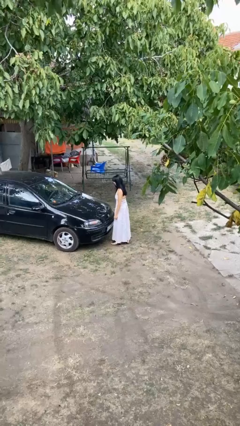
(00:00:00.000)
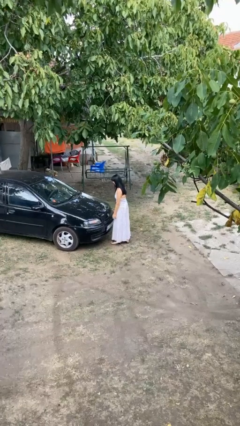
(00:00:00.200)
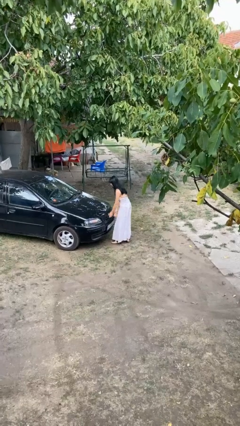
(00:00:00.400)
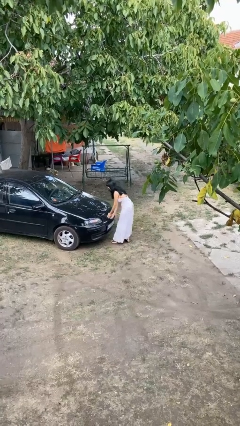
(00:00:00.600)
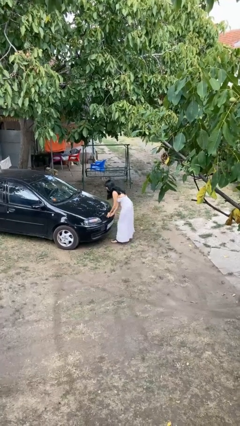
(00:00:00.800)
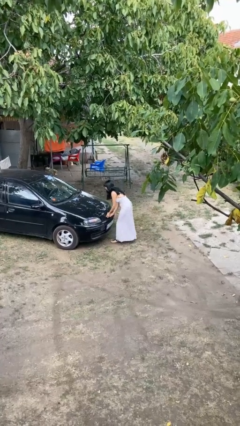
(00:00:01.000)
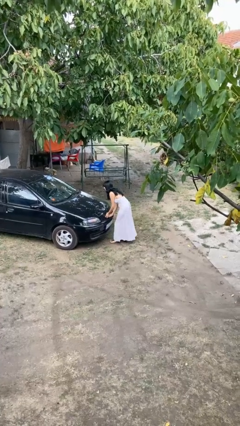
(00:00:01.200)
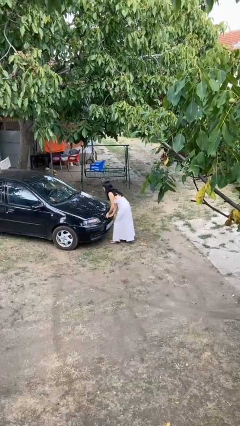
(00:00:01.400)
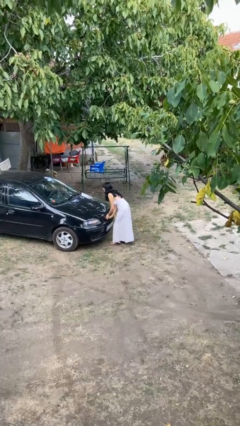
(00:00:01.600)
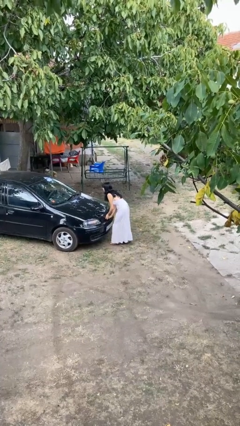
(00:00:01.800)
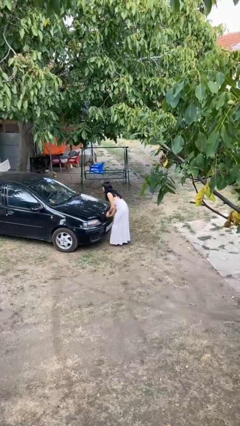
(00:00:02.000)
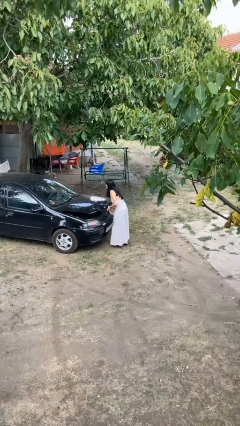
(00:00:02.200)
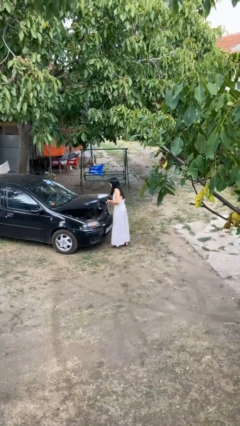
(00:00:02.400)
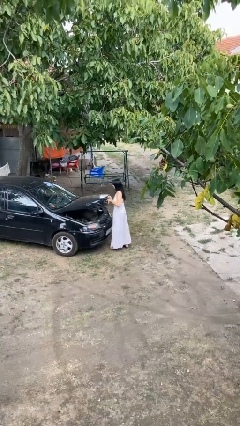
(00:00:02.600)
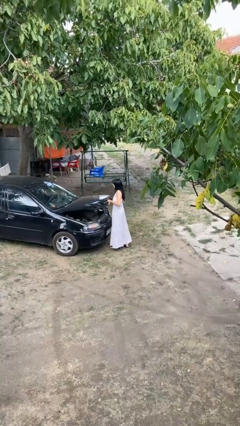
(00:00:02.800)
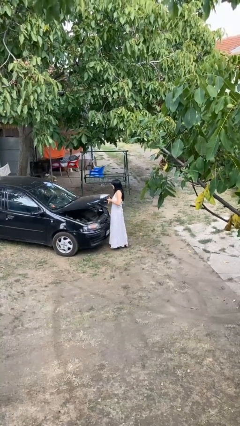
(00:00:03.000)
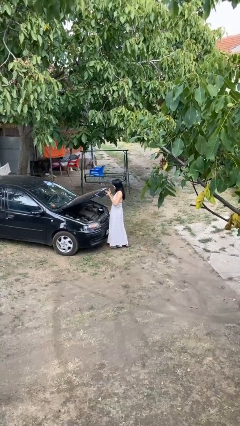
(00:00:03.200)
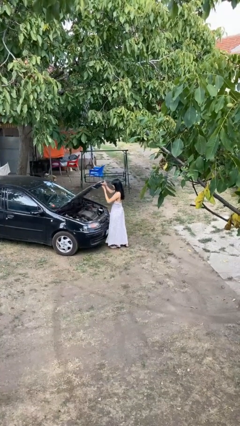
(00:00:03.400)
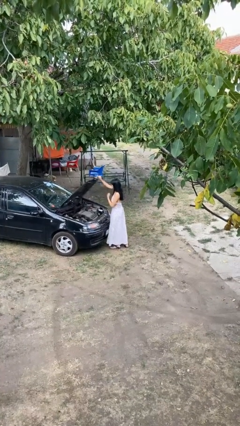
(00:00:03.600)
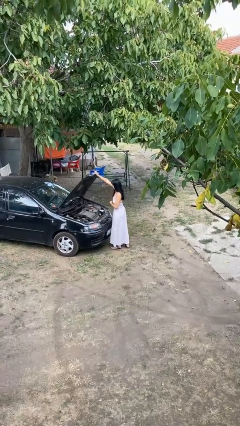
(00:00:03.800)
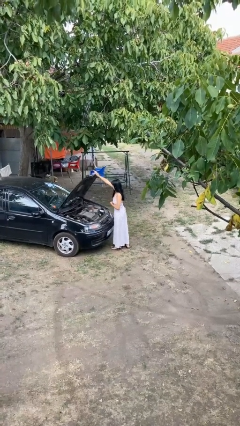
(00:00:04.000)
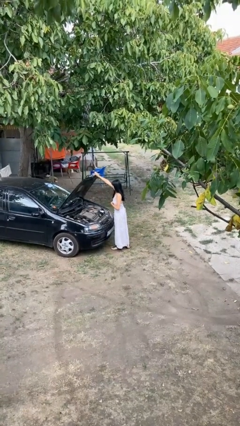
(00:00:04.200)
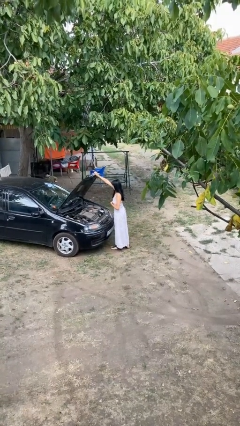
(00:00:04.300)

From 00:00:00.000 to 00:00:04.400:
person opens car hood

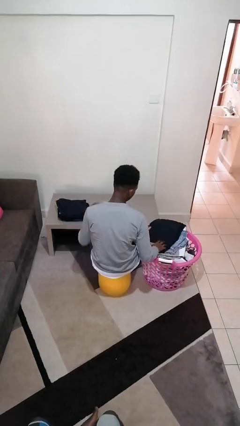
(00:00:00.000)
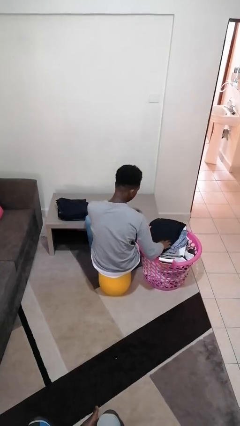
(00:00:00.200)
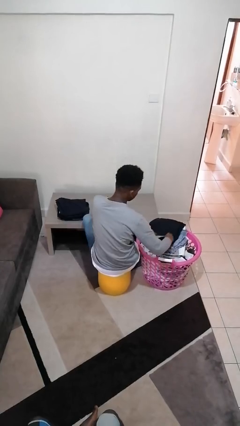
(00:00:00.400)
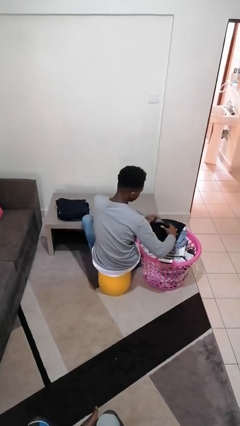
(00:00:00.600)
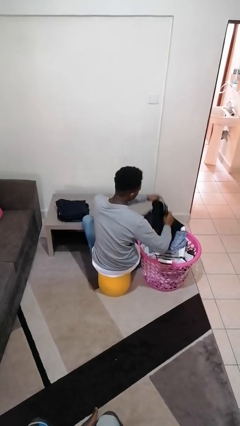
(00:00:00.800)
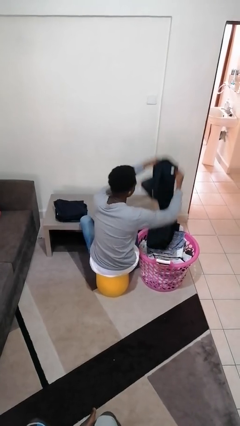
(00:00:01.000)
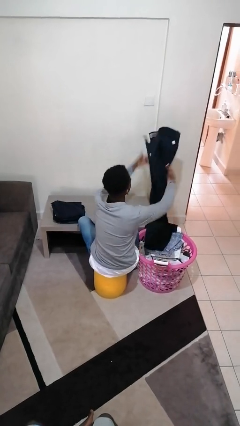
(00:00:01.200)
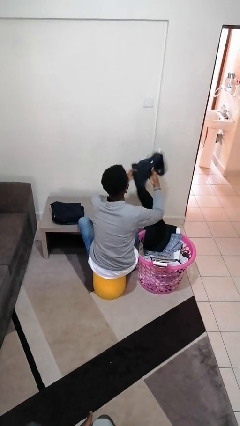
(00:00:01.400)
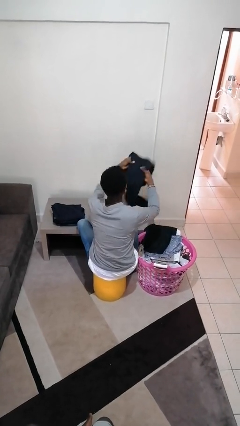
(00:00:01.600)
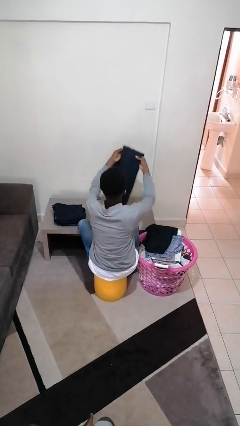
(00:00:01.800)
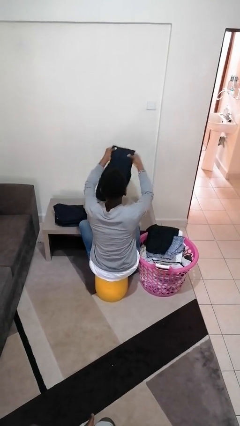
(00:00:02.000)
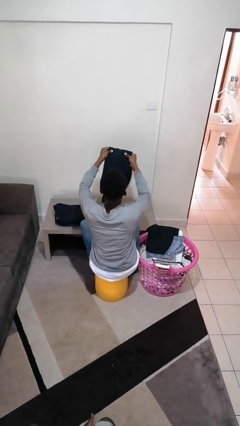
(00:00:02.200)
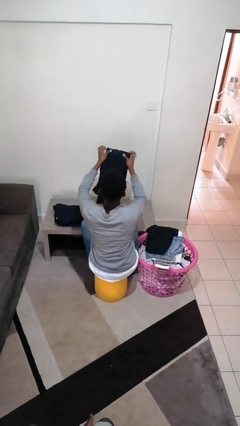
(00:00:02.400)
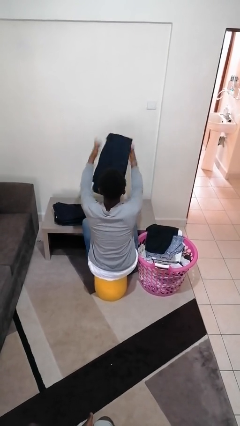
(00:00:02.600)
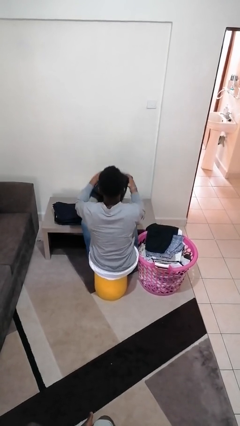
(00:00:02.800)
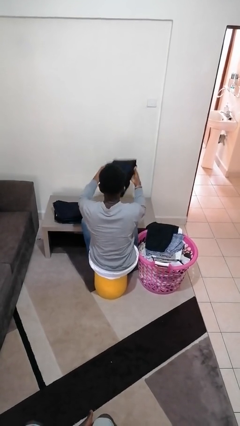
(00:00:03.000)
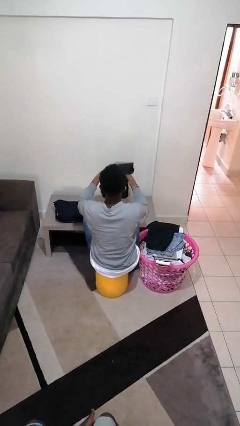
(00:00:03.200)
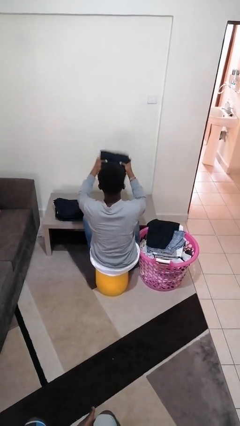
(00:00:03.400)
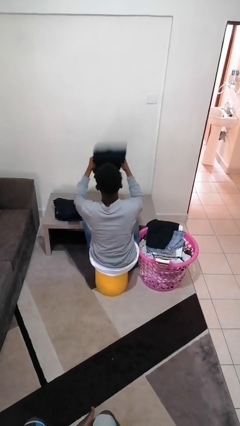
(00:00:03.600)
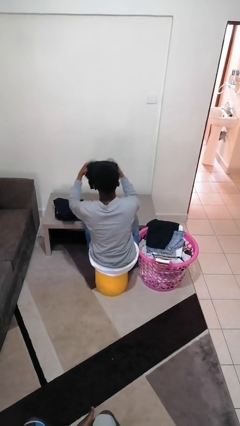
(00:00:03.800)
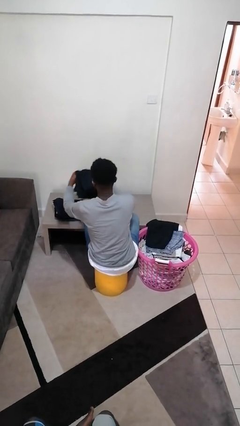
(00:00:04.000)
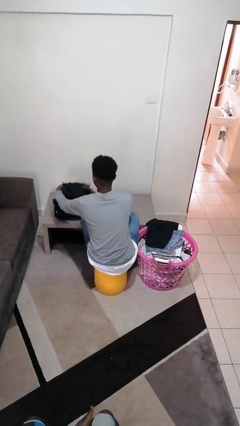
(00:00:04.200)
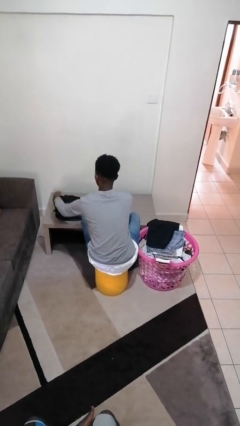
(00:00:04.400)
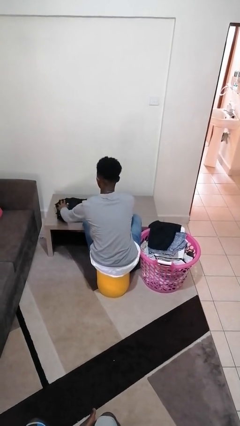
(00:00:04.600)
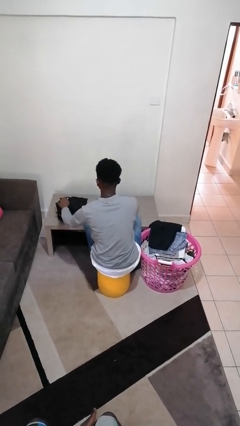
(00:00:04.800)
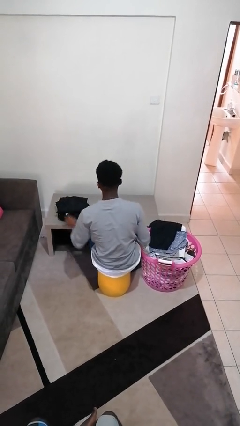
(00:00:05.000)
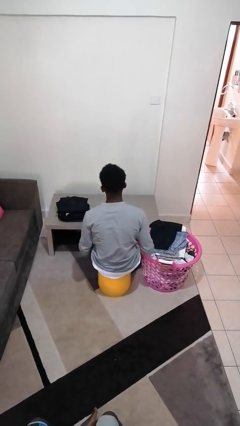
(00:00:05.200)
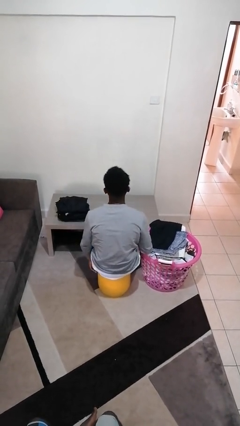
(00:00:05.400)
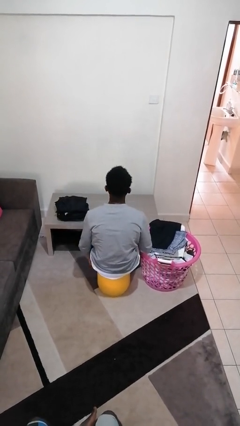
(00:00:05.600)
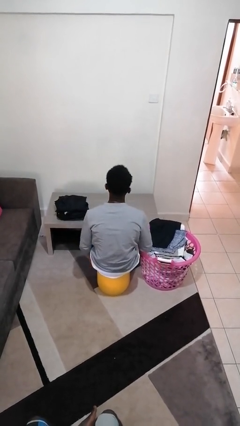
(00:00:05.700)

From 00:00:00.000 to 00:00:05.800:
person folds pants

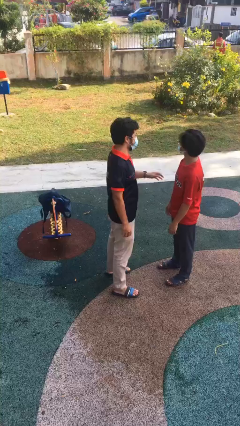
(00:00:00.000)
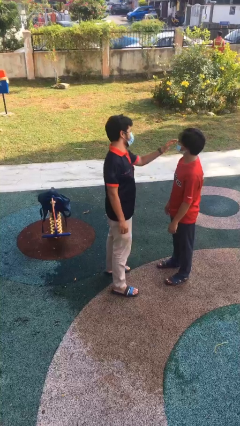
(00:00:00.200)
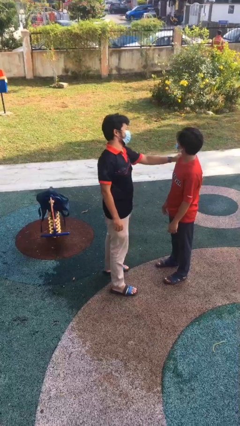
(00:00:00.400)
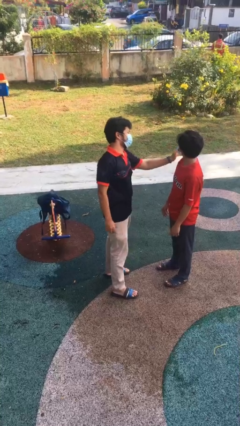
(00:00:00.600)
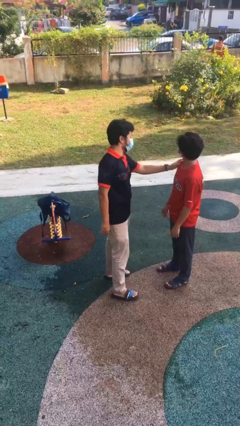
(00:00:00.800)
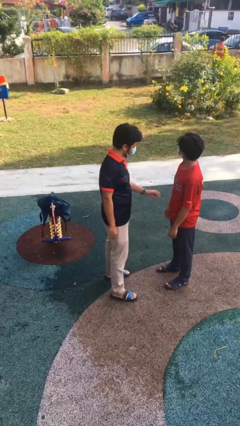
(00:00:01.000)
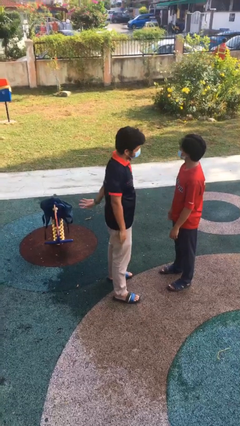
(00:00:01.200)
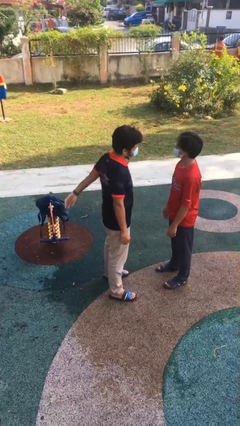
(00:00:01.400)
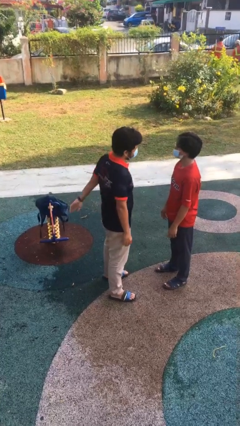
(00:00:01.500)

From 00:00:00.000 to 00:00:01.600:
person pounds shoulders of person

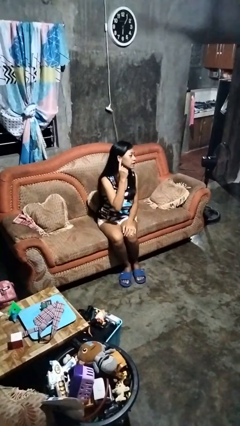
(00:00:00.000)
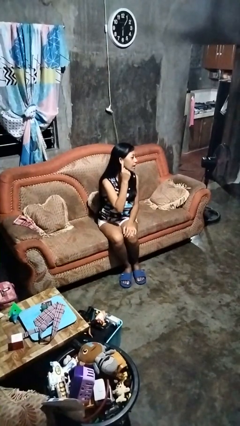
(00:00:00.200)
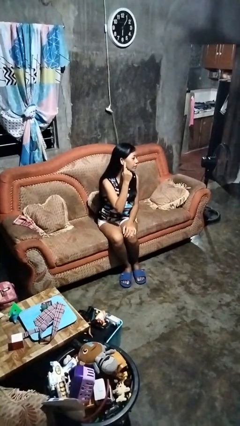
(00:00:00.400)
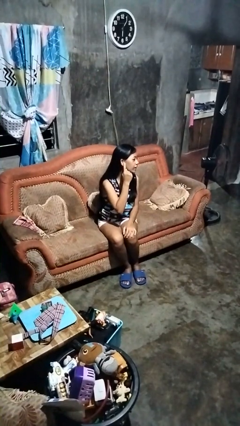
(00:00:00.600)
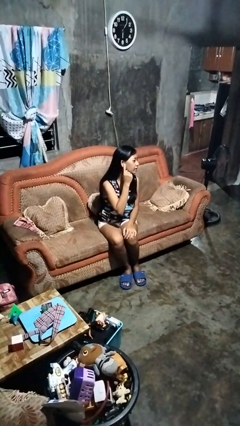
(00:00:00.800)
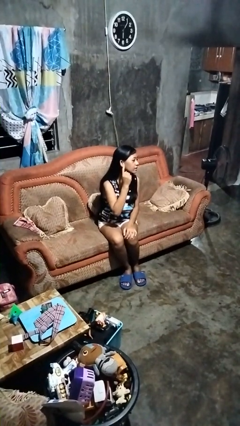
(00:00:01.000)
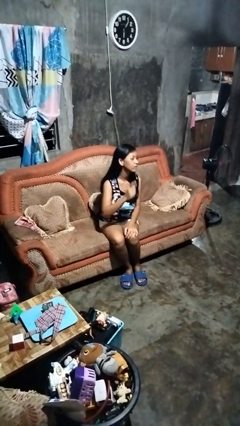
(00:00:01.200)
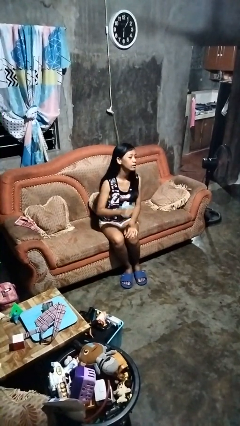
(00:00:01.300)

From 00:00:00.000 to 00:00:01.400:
person gestures listen closely

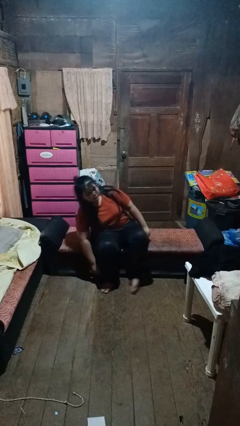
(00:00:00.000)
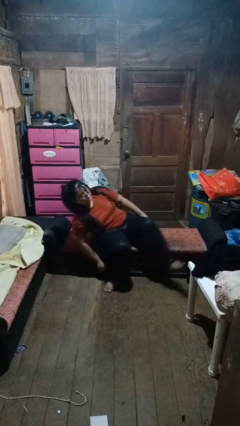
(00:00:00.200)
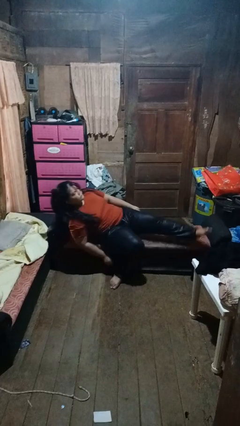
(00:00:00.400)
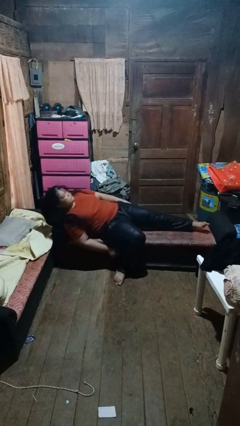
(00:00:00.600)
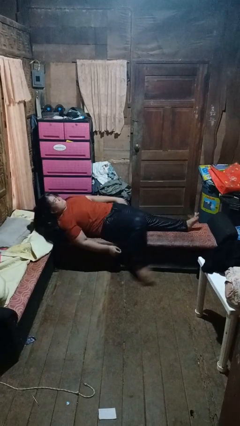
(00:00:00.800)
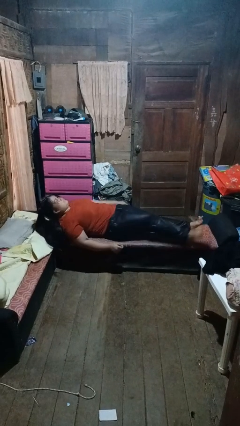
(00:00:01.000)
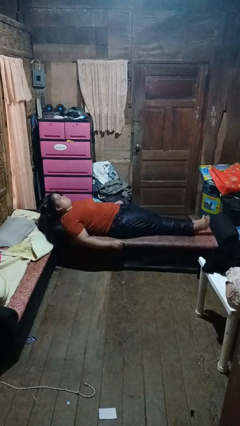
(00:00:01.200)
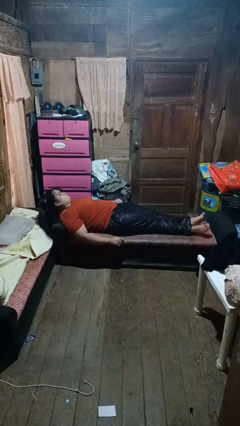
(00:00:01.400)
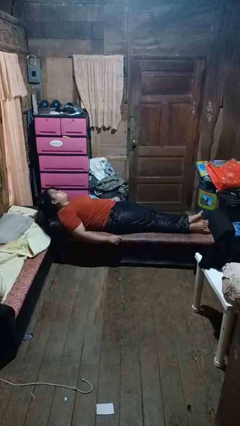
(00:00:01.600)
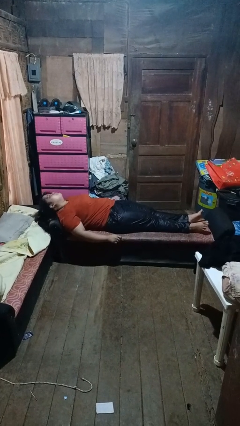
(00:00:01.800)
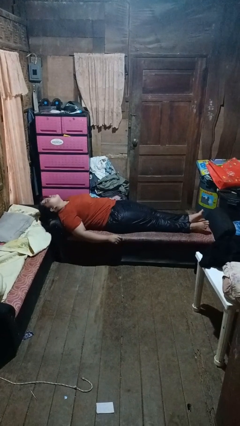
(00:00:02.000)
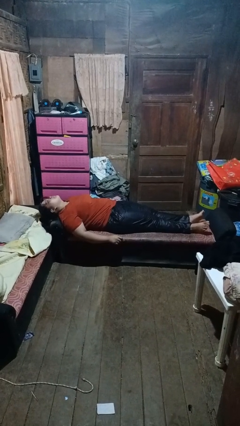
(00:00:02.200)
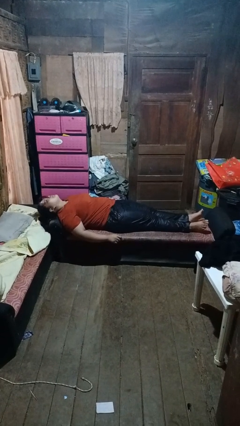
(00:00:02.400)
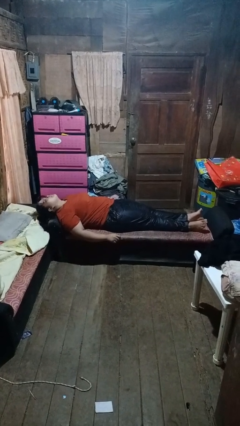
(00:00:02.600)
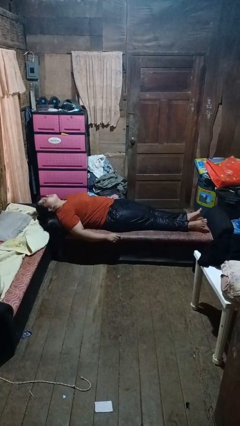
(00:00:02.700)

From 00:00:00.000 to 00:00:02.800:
person lies down on couch

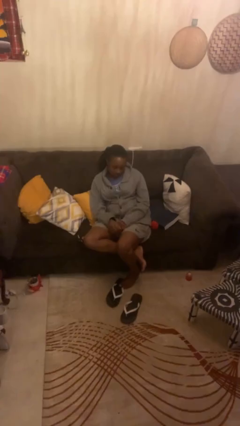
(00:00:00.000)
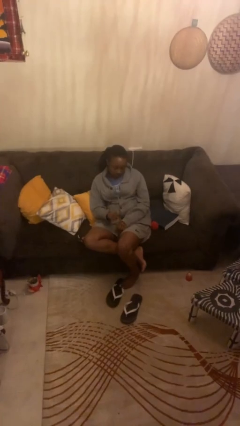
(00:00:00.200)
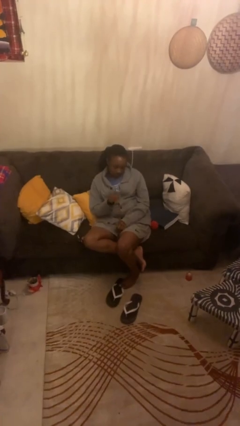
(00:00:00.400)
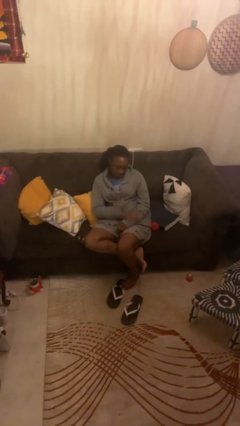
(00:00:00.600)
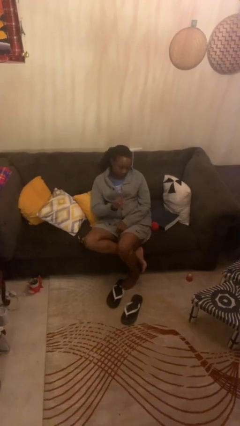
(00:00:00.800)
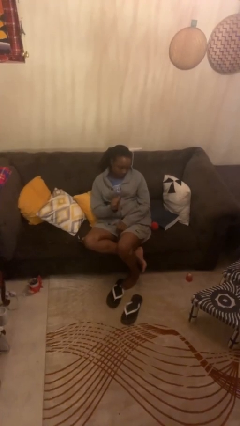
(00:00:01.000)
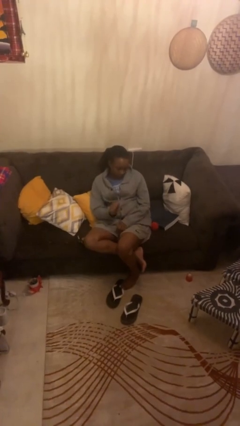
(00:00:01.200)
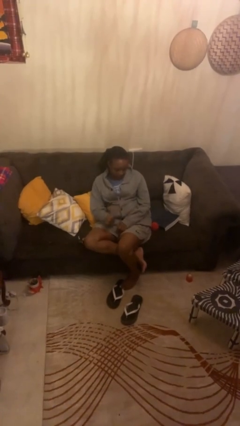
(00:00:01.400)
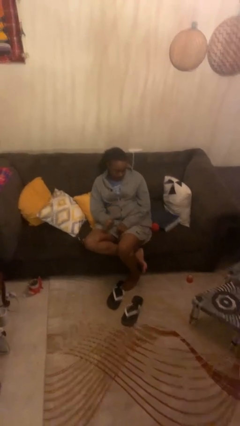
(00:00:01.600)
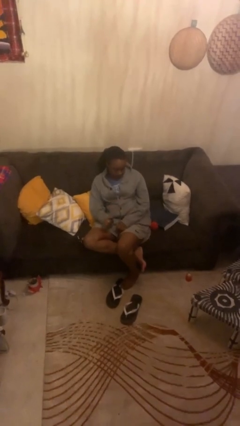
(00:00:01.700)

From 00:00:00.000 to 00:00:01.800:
person swats bug
